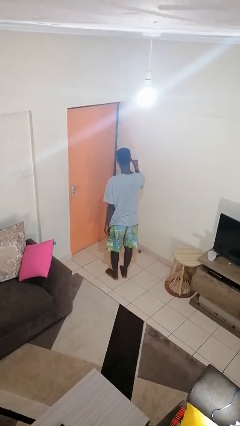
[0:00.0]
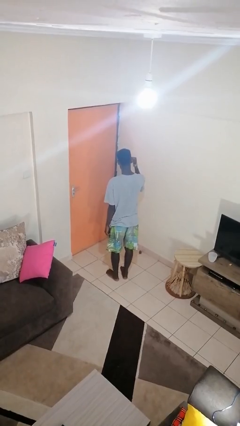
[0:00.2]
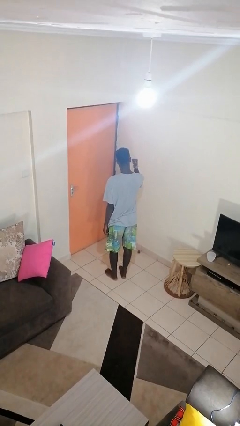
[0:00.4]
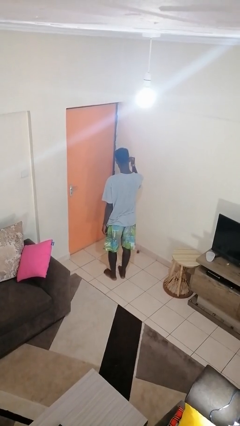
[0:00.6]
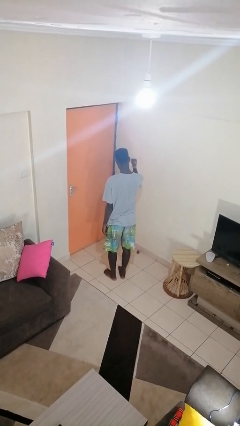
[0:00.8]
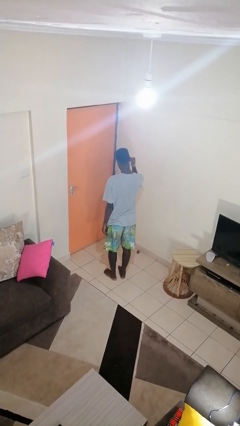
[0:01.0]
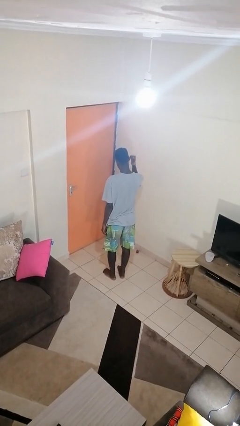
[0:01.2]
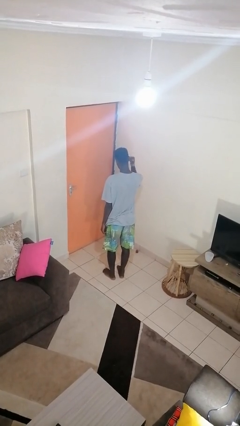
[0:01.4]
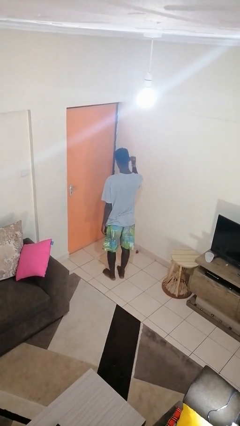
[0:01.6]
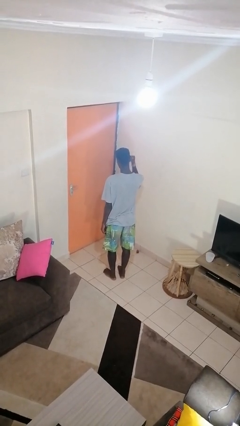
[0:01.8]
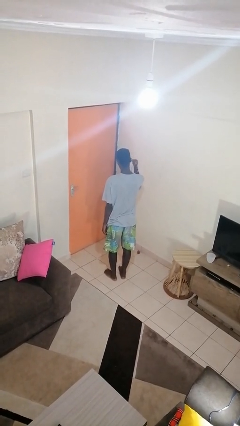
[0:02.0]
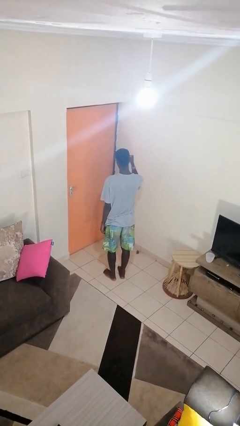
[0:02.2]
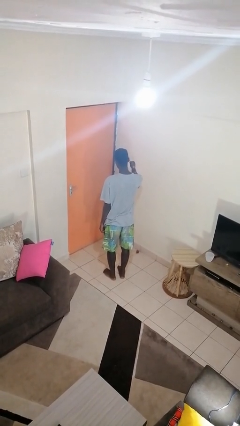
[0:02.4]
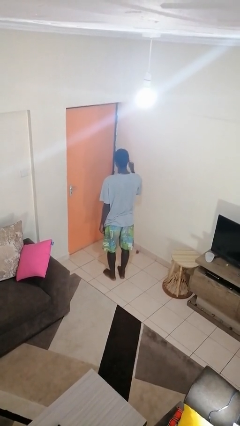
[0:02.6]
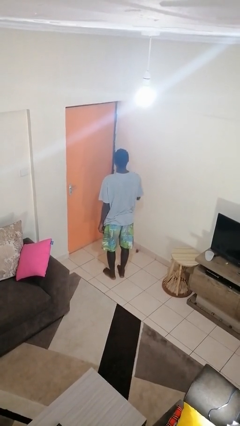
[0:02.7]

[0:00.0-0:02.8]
person gestures behind me

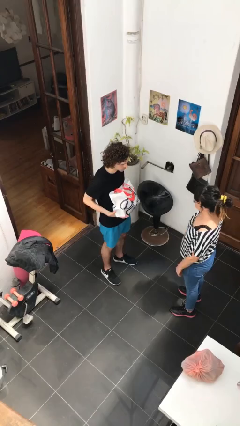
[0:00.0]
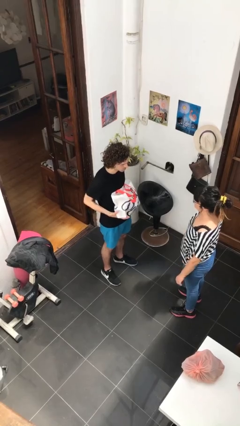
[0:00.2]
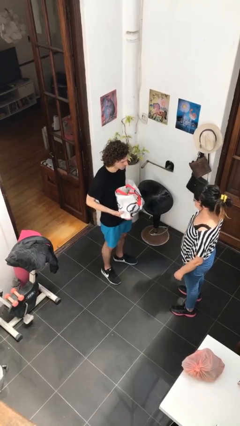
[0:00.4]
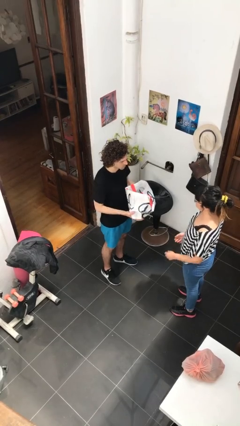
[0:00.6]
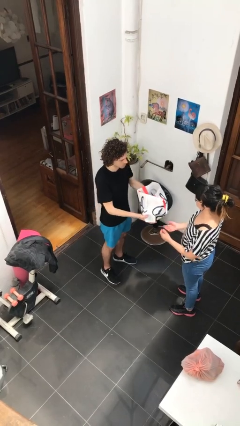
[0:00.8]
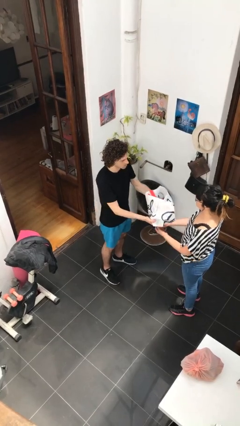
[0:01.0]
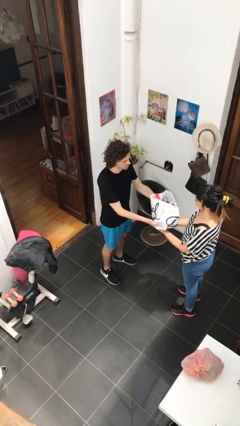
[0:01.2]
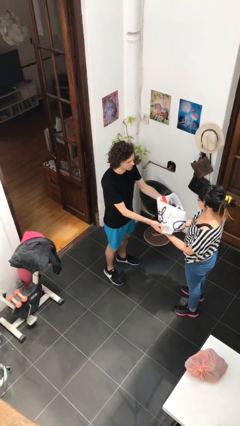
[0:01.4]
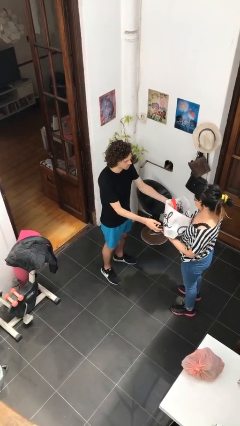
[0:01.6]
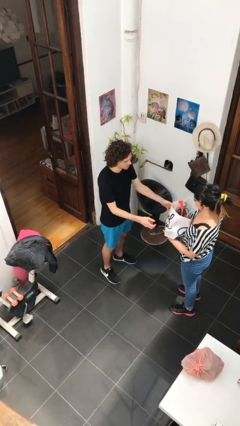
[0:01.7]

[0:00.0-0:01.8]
person transfers object to person

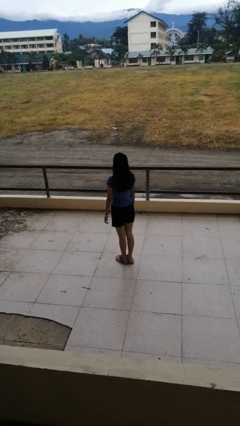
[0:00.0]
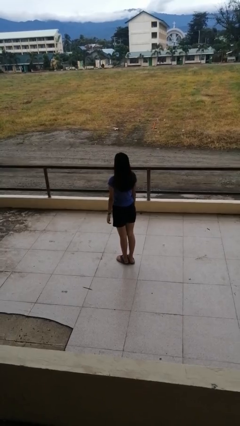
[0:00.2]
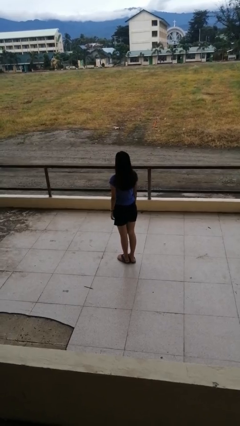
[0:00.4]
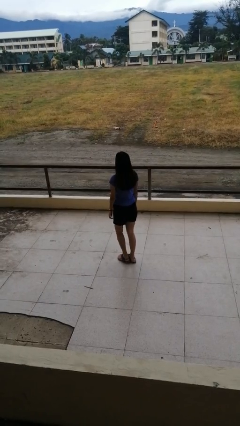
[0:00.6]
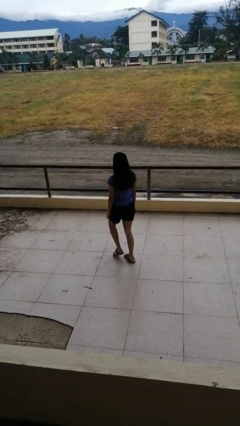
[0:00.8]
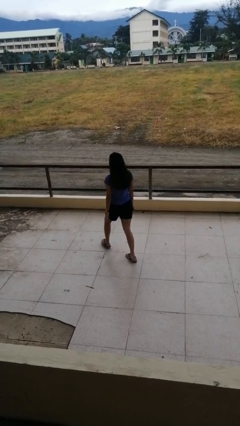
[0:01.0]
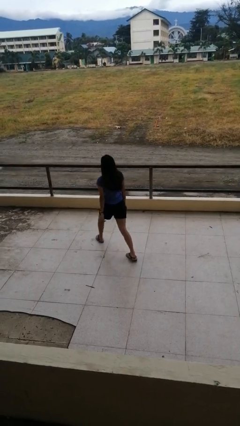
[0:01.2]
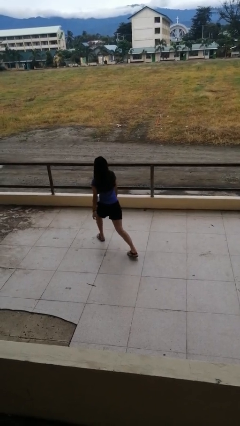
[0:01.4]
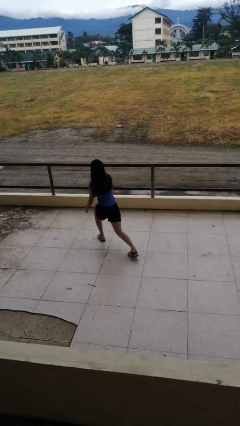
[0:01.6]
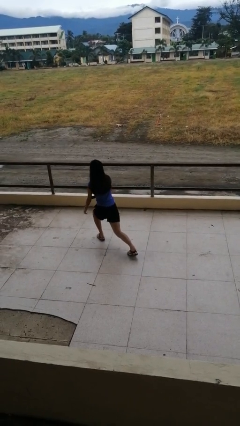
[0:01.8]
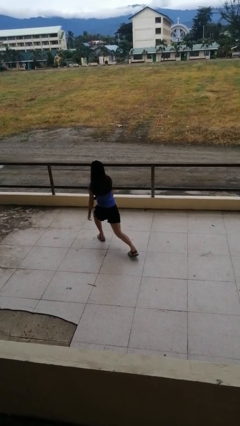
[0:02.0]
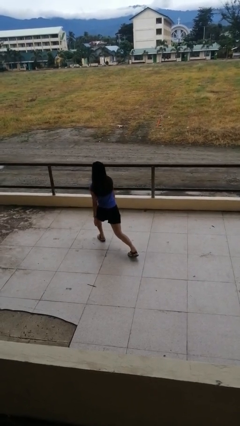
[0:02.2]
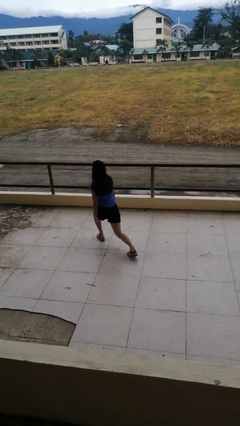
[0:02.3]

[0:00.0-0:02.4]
person exercises with lunges

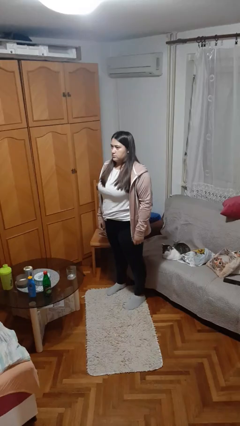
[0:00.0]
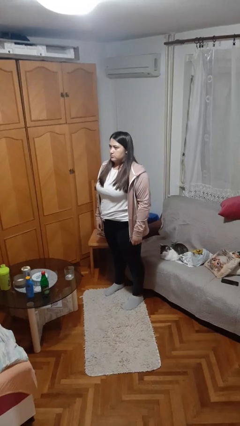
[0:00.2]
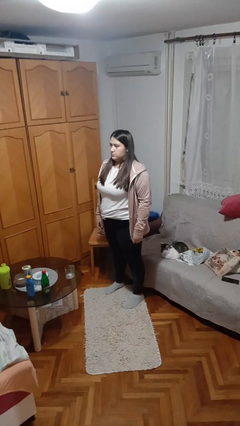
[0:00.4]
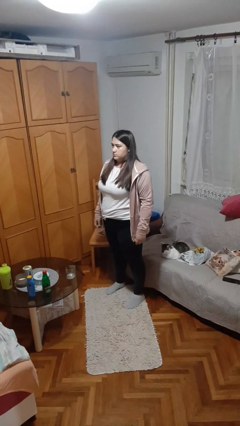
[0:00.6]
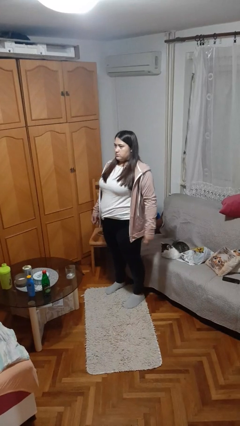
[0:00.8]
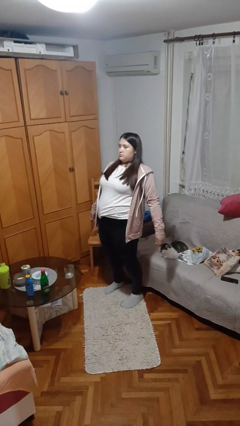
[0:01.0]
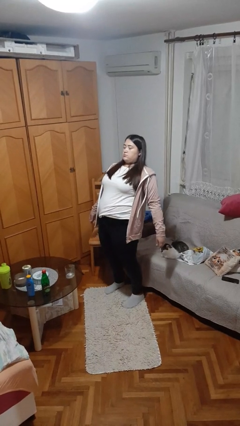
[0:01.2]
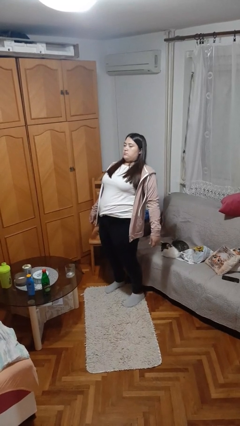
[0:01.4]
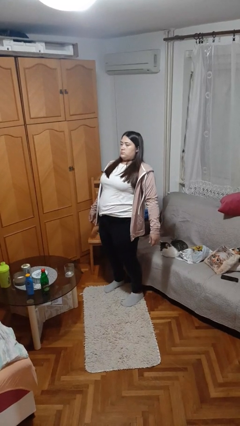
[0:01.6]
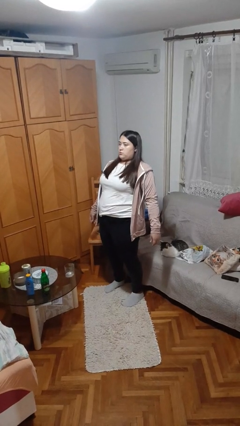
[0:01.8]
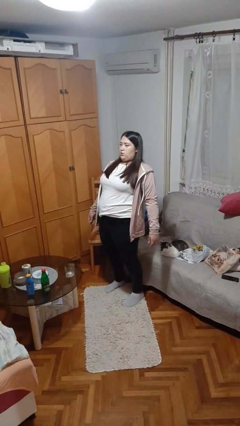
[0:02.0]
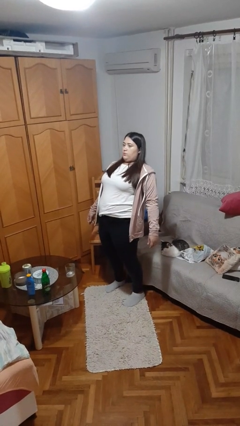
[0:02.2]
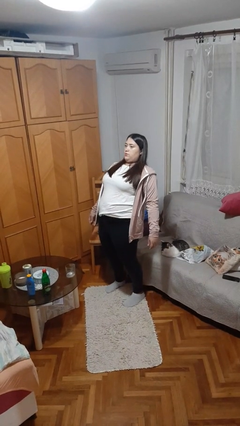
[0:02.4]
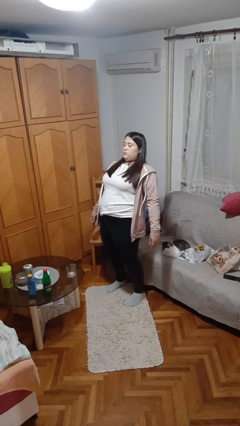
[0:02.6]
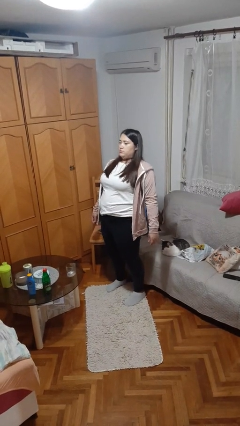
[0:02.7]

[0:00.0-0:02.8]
person stretches back

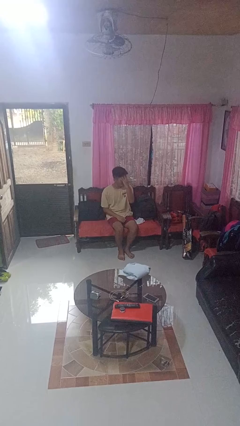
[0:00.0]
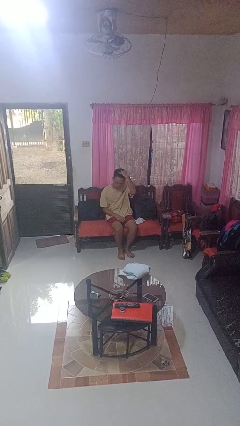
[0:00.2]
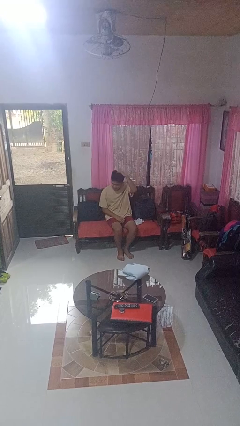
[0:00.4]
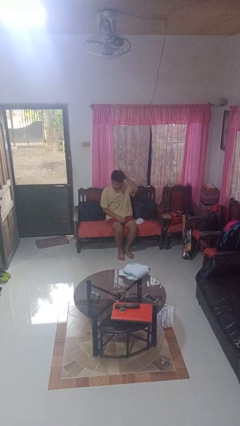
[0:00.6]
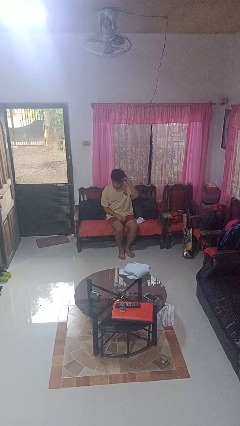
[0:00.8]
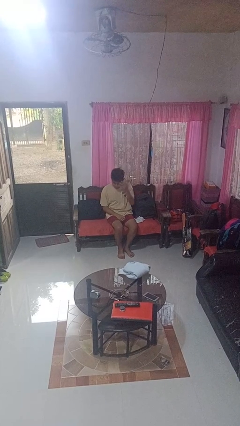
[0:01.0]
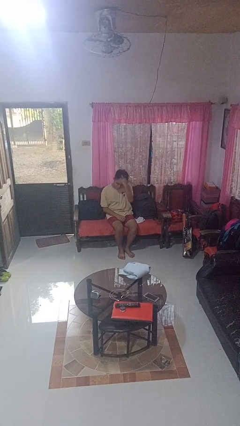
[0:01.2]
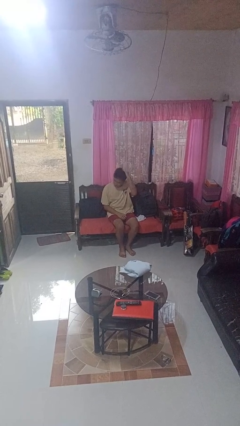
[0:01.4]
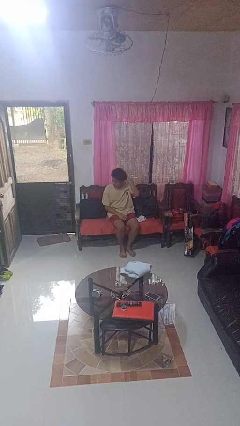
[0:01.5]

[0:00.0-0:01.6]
person strokes hair

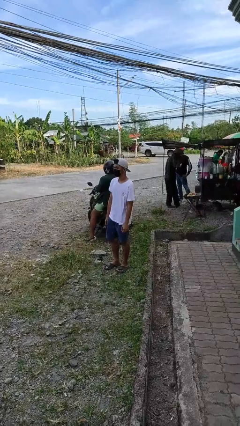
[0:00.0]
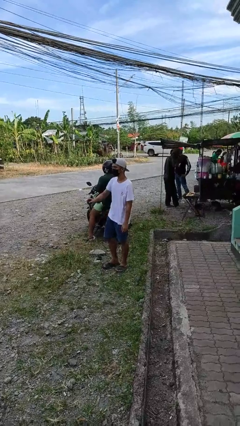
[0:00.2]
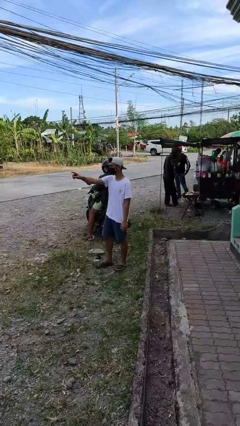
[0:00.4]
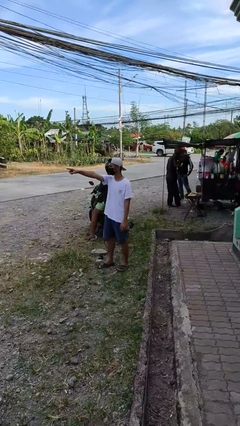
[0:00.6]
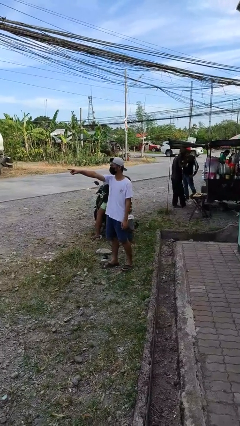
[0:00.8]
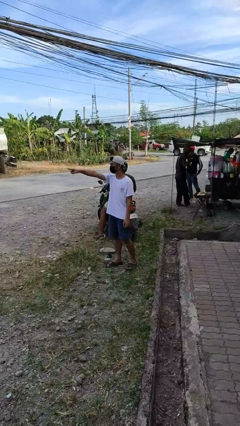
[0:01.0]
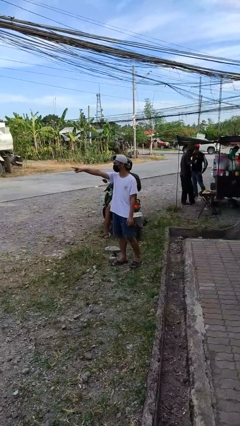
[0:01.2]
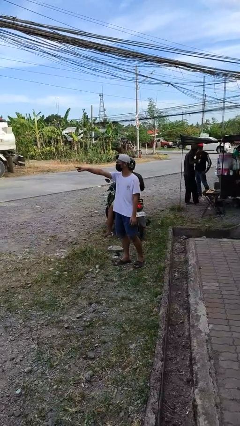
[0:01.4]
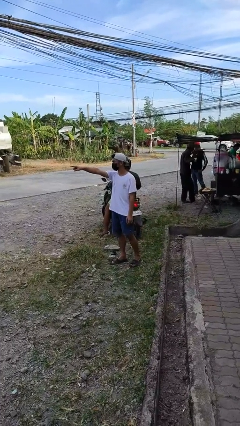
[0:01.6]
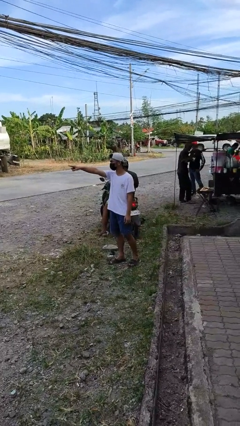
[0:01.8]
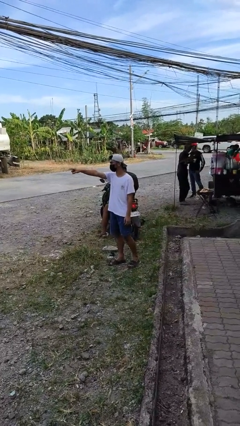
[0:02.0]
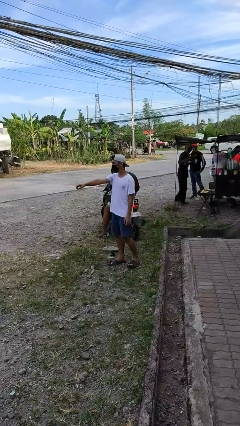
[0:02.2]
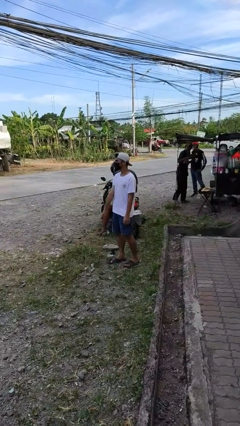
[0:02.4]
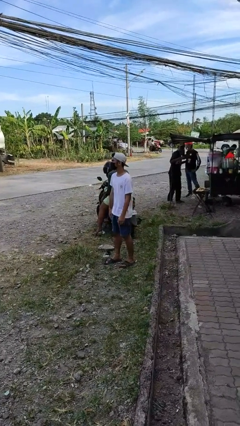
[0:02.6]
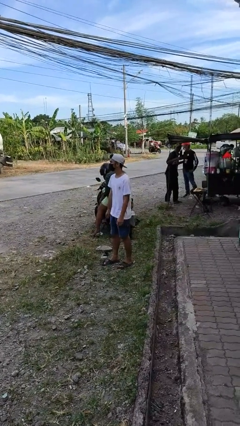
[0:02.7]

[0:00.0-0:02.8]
person points at person

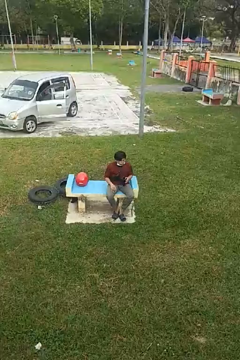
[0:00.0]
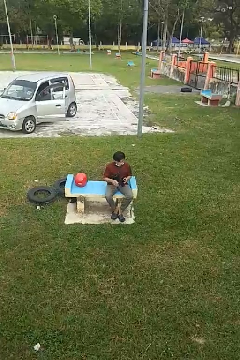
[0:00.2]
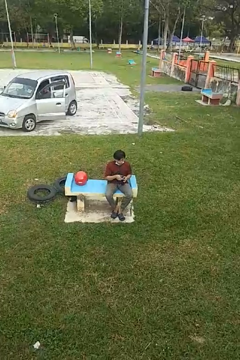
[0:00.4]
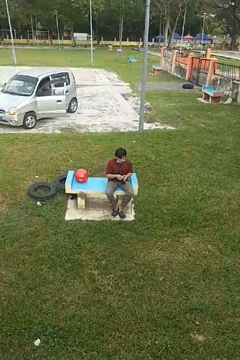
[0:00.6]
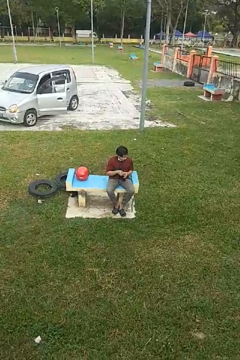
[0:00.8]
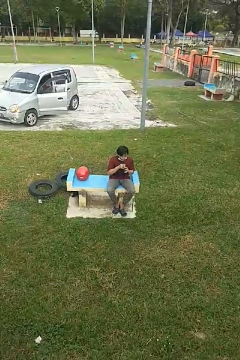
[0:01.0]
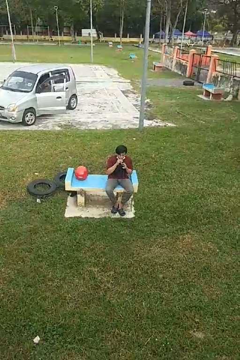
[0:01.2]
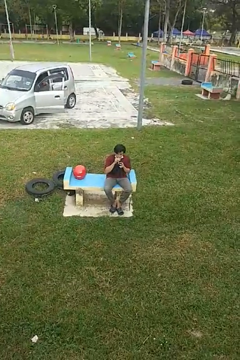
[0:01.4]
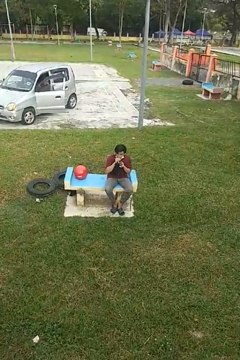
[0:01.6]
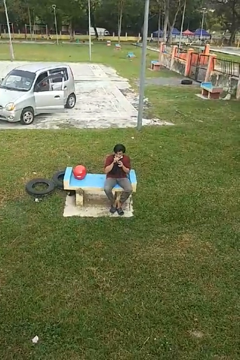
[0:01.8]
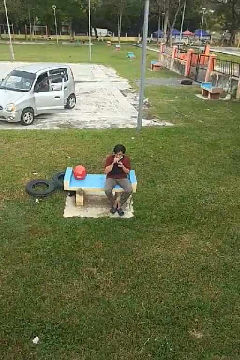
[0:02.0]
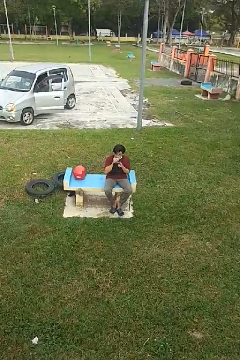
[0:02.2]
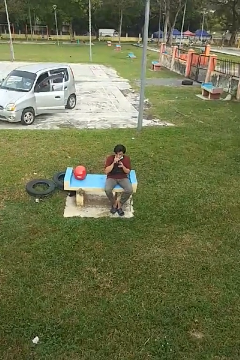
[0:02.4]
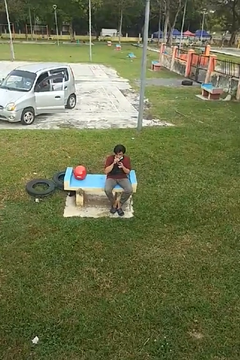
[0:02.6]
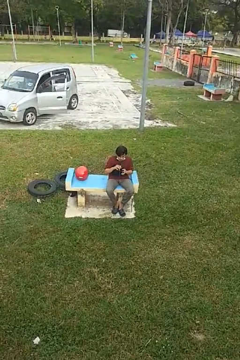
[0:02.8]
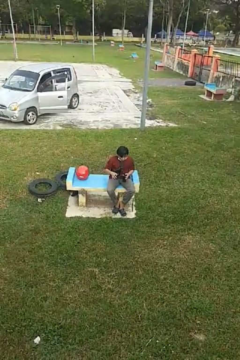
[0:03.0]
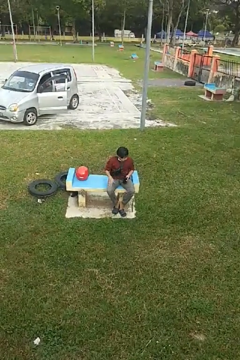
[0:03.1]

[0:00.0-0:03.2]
person drinks from straw
